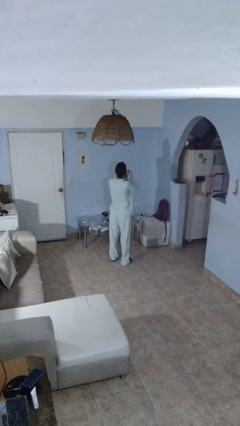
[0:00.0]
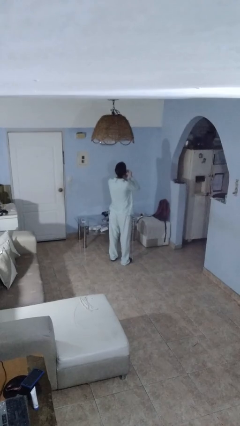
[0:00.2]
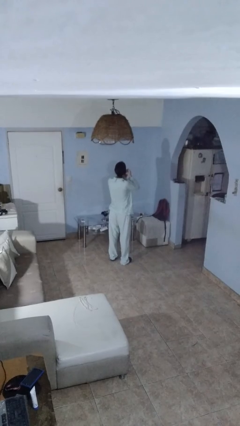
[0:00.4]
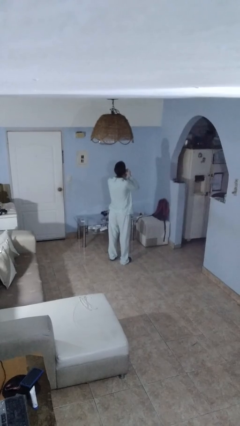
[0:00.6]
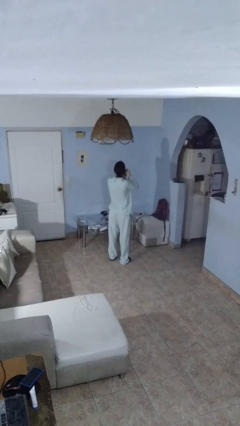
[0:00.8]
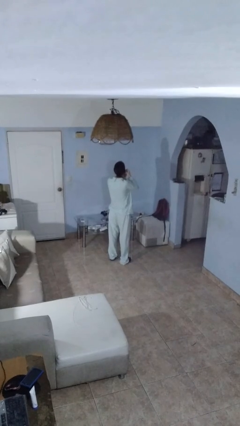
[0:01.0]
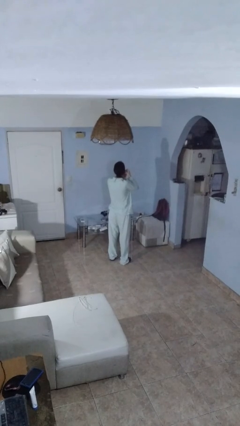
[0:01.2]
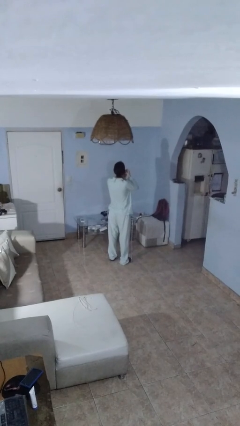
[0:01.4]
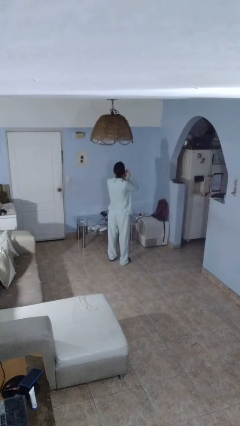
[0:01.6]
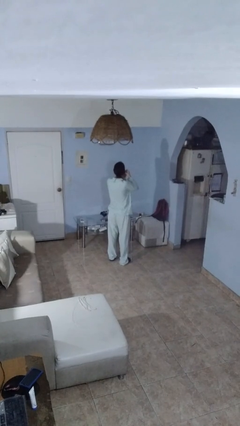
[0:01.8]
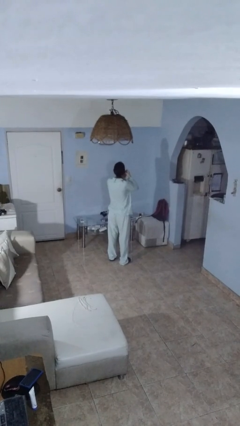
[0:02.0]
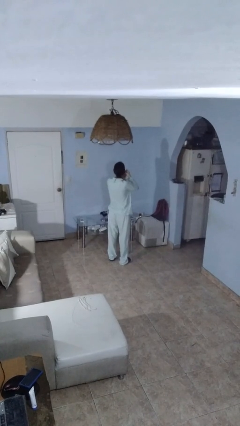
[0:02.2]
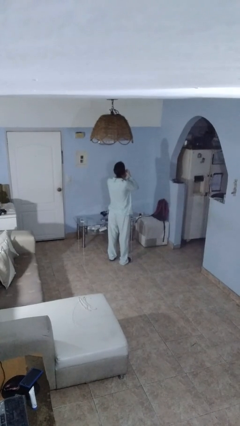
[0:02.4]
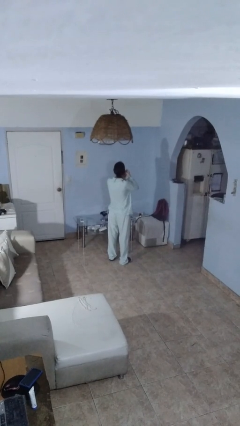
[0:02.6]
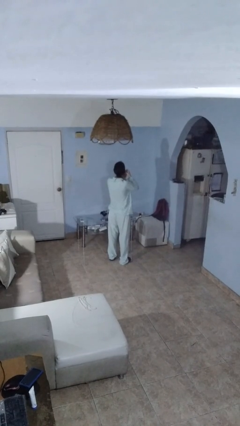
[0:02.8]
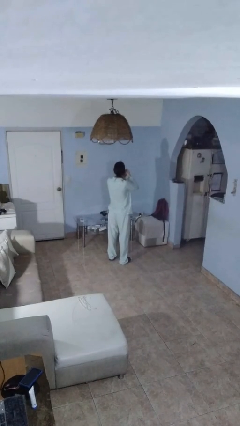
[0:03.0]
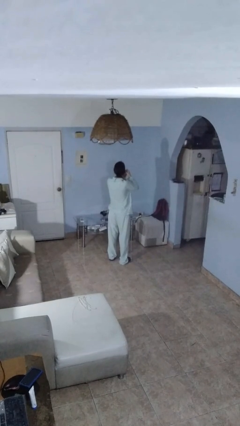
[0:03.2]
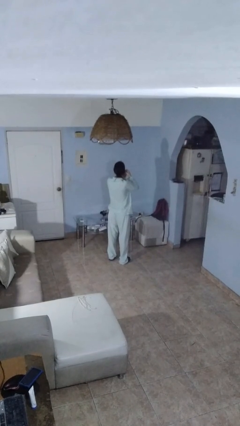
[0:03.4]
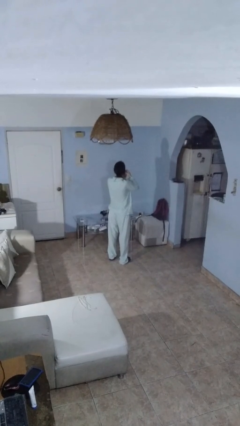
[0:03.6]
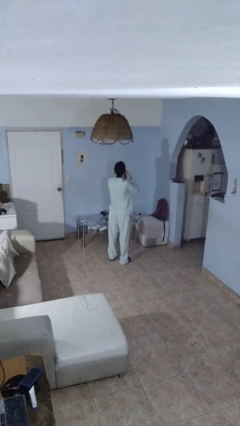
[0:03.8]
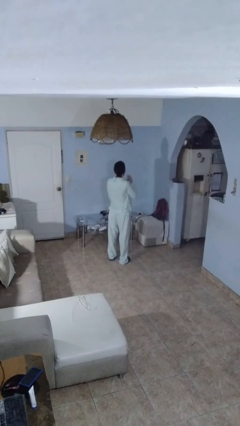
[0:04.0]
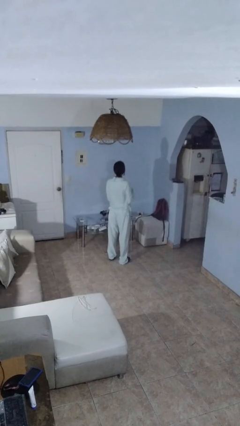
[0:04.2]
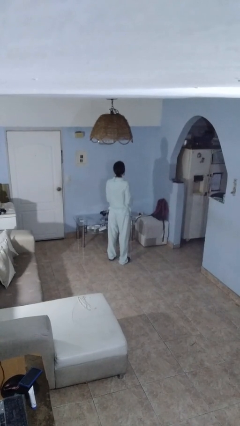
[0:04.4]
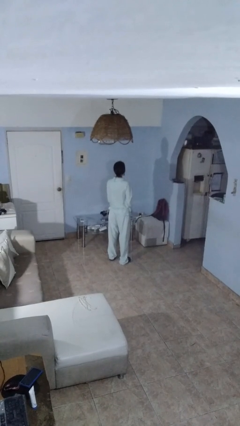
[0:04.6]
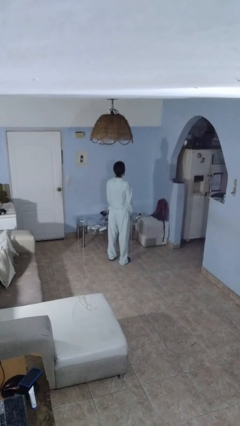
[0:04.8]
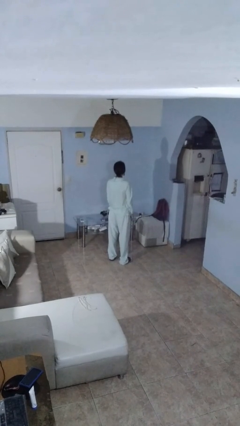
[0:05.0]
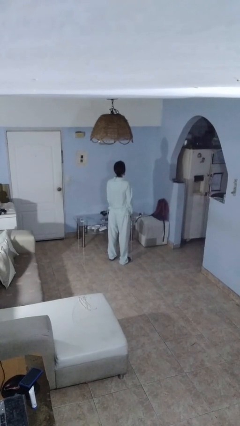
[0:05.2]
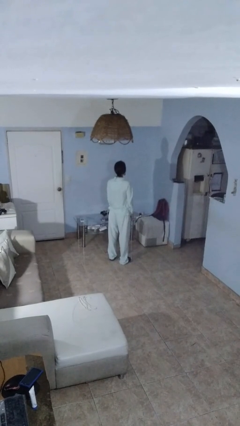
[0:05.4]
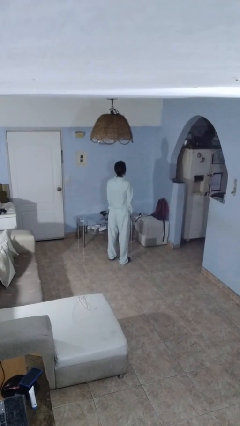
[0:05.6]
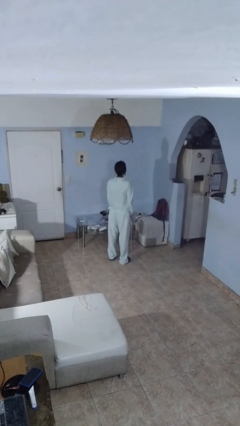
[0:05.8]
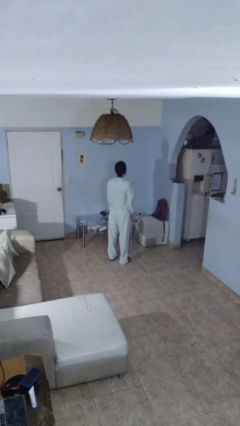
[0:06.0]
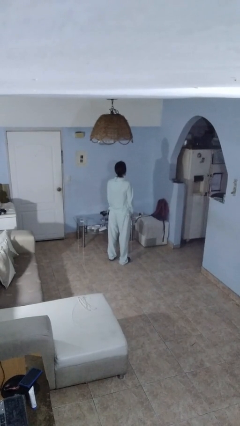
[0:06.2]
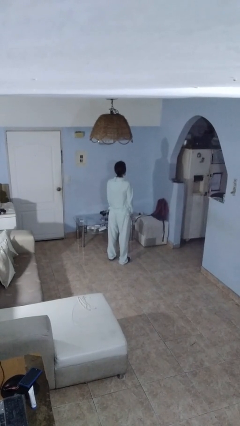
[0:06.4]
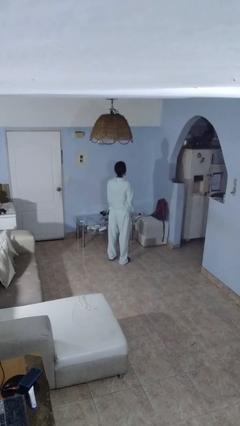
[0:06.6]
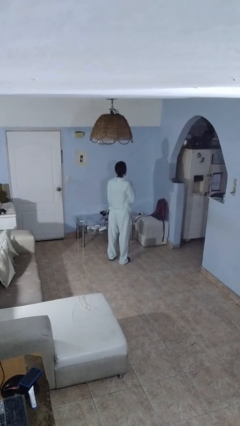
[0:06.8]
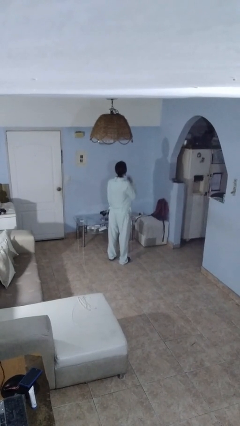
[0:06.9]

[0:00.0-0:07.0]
person puts on earrings

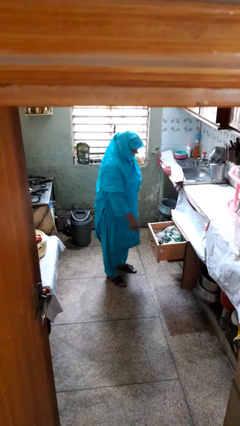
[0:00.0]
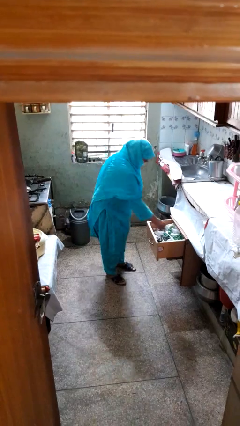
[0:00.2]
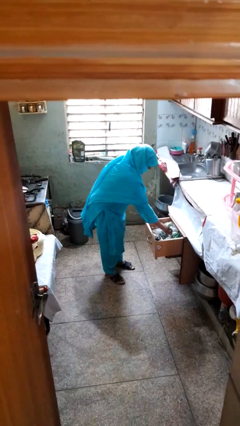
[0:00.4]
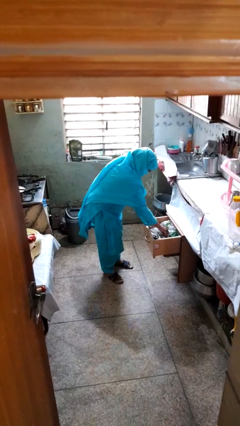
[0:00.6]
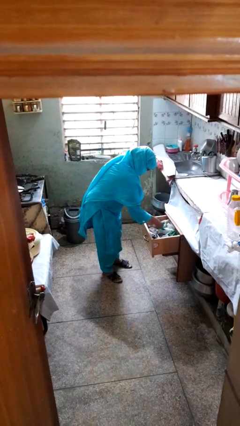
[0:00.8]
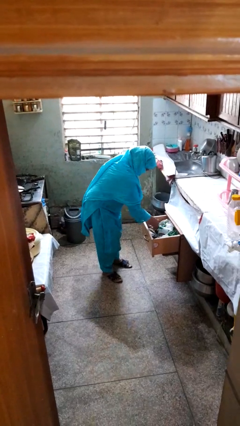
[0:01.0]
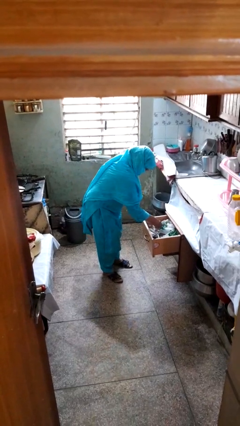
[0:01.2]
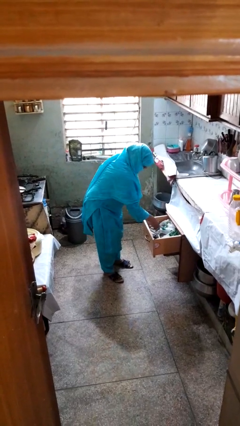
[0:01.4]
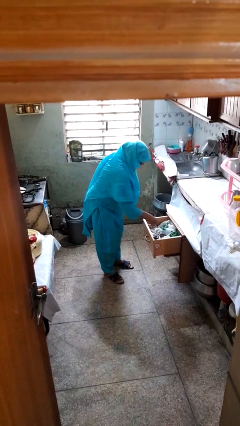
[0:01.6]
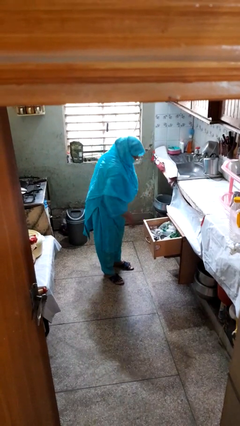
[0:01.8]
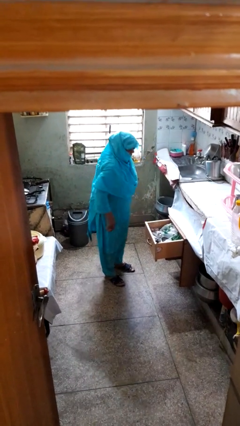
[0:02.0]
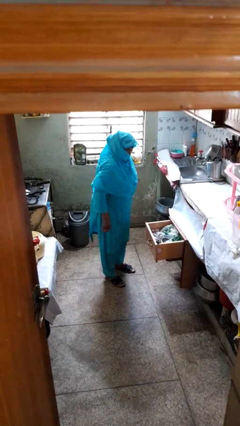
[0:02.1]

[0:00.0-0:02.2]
person searches in kitchen drawer

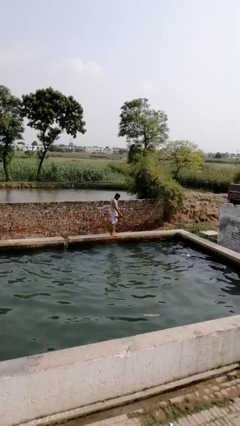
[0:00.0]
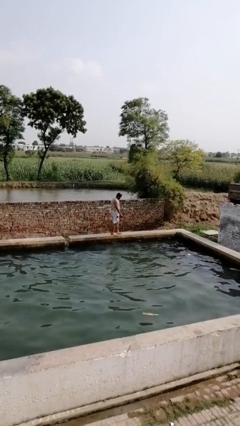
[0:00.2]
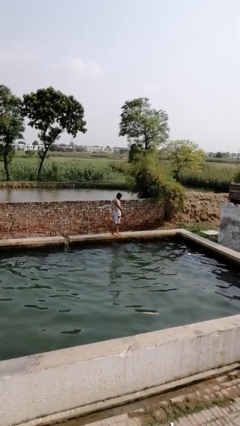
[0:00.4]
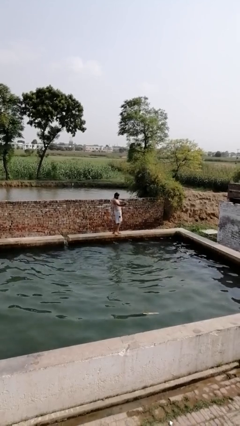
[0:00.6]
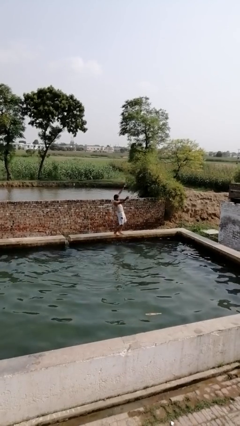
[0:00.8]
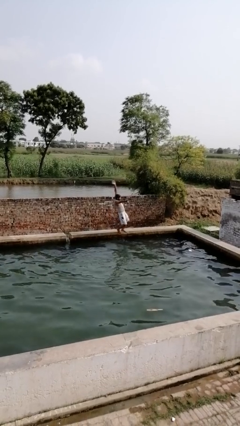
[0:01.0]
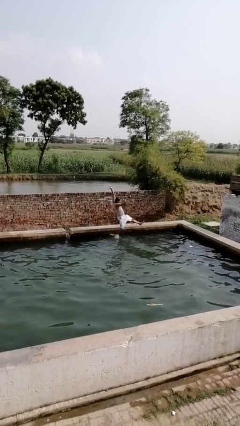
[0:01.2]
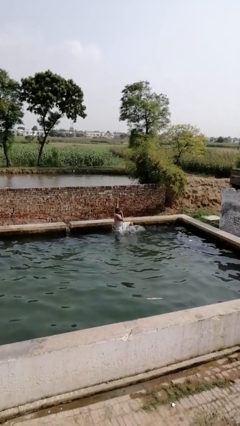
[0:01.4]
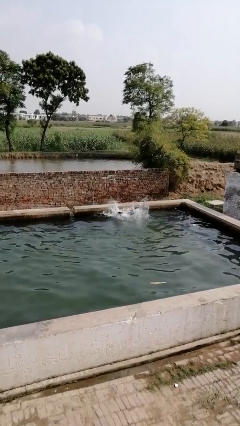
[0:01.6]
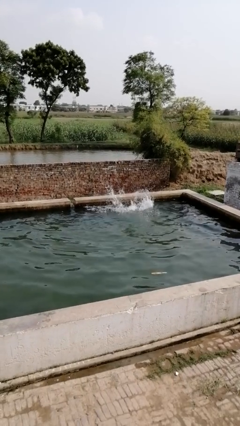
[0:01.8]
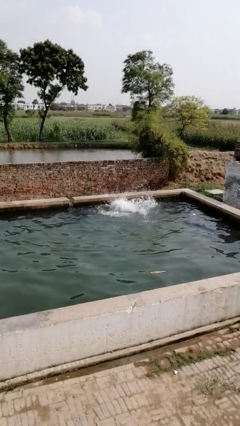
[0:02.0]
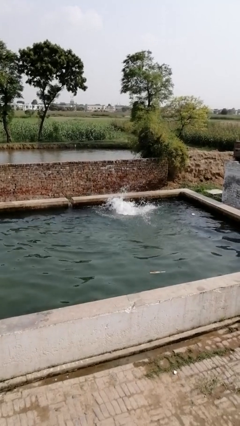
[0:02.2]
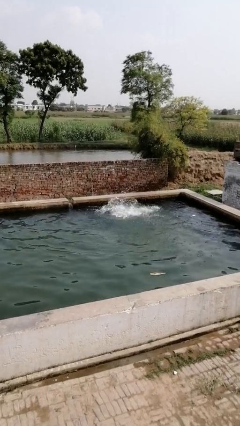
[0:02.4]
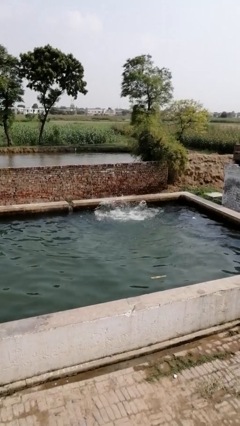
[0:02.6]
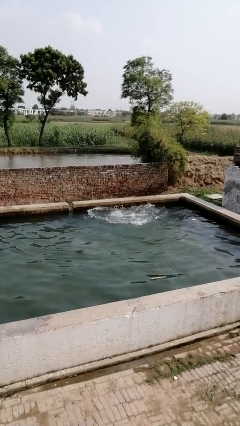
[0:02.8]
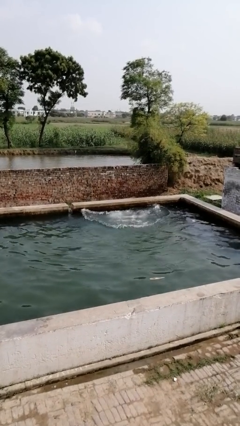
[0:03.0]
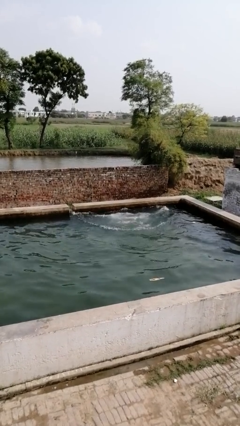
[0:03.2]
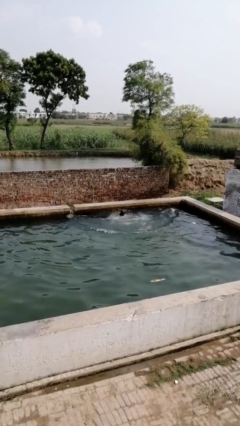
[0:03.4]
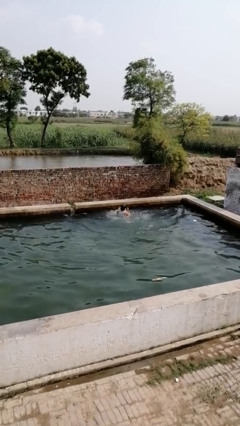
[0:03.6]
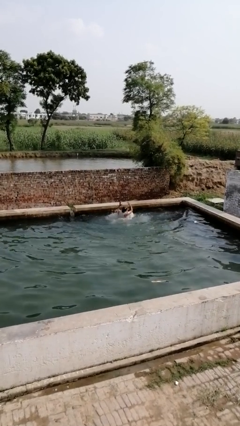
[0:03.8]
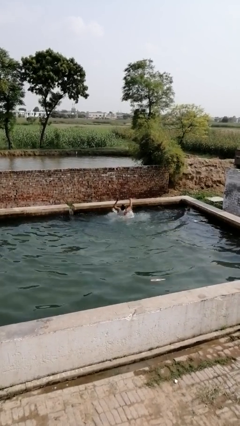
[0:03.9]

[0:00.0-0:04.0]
person falls into pool

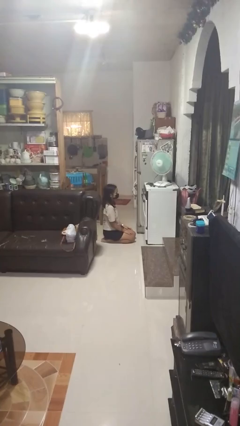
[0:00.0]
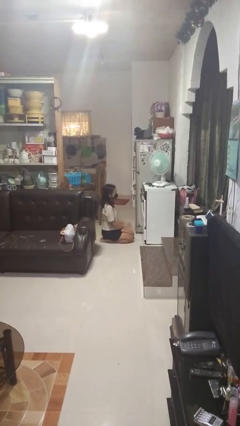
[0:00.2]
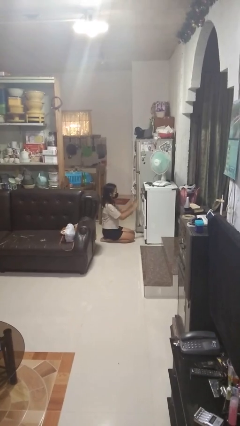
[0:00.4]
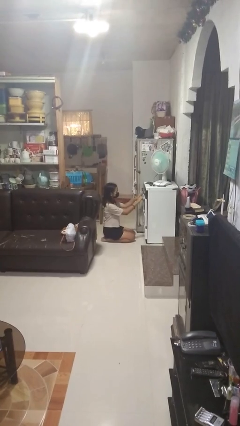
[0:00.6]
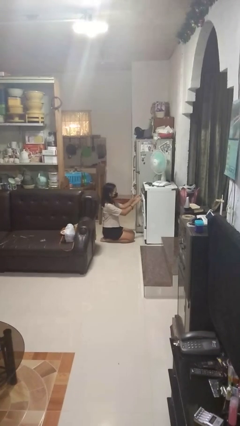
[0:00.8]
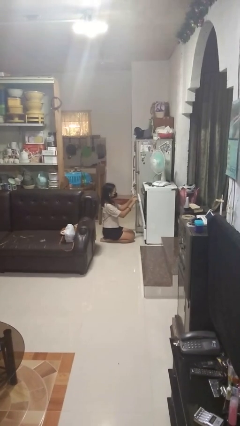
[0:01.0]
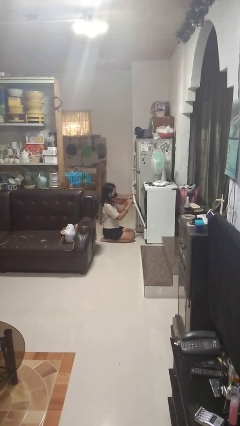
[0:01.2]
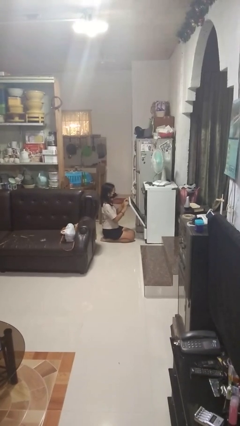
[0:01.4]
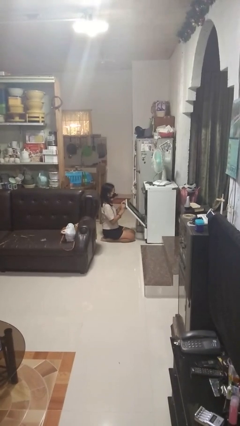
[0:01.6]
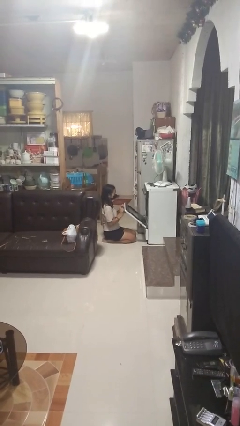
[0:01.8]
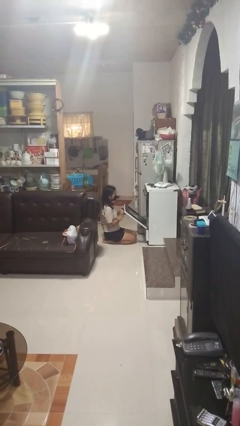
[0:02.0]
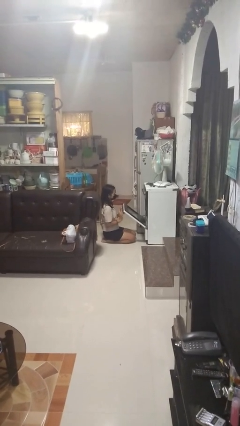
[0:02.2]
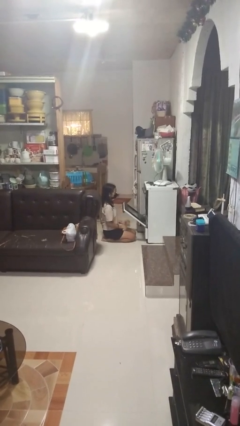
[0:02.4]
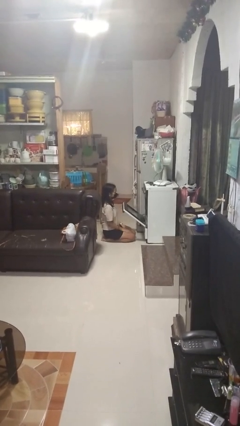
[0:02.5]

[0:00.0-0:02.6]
person opens oven door

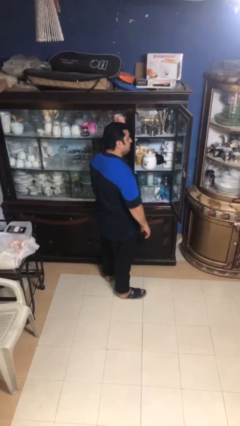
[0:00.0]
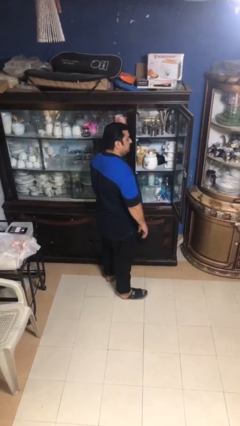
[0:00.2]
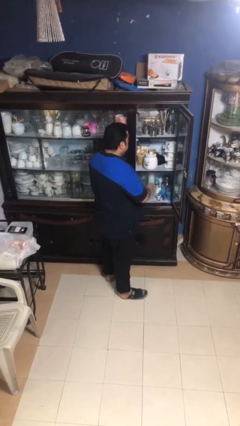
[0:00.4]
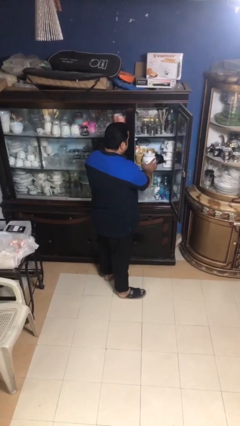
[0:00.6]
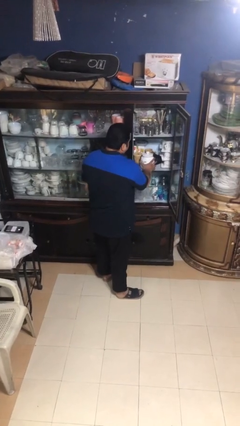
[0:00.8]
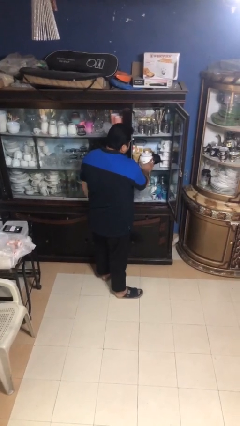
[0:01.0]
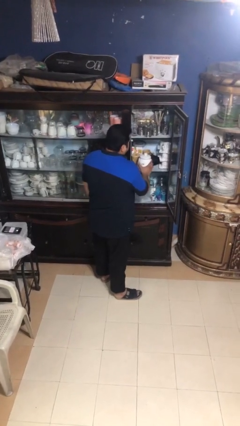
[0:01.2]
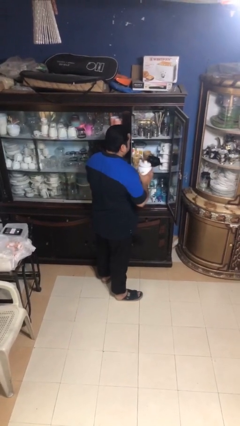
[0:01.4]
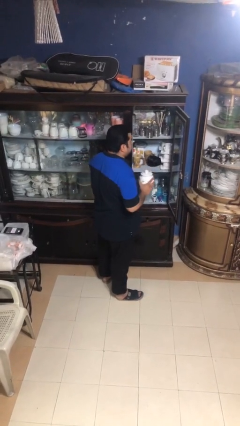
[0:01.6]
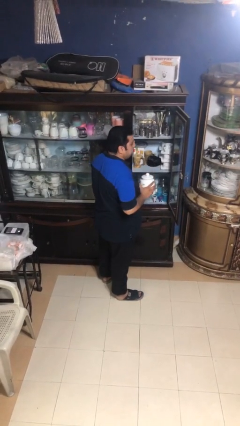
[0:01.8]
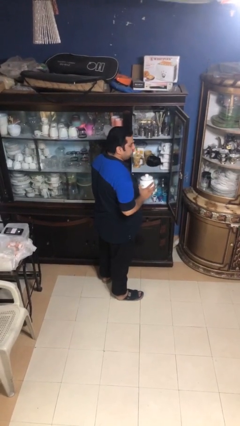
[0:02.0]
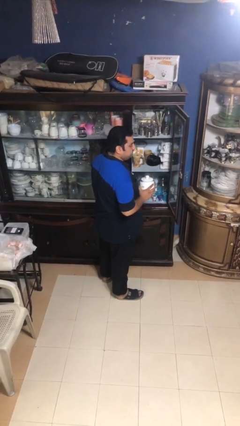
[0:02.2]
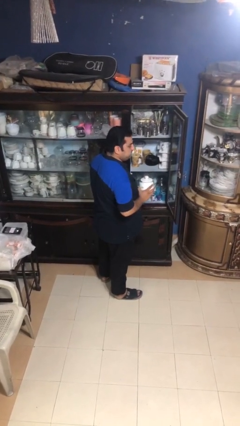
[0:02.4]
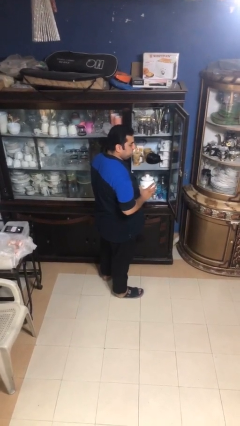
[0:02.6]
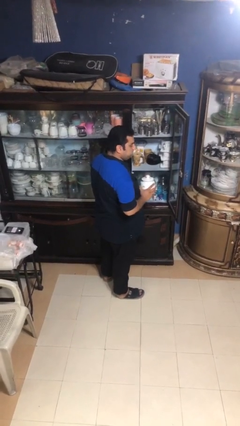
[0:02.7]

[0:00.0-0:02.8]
person picks up object from cabinet
